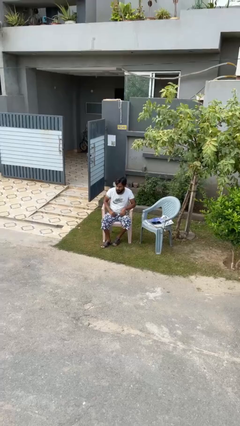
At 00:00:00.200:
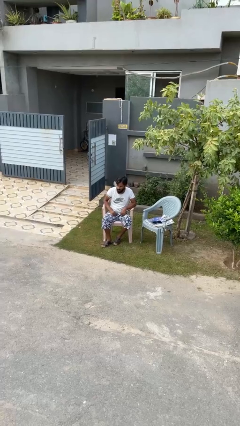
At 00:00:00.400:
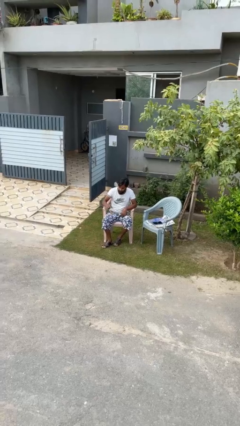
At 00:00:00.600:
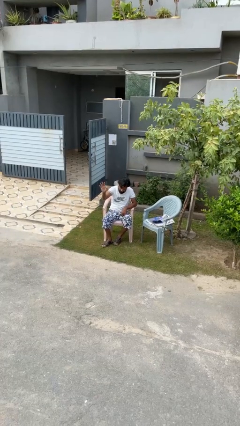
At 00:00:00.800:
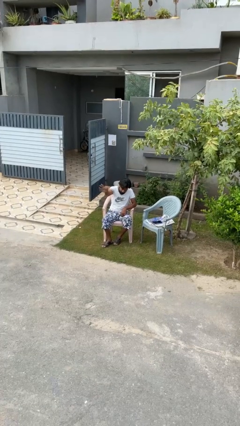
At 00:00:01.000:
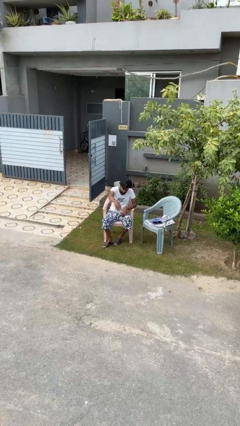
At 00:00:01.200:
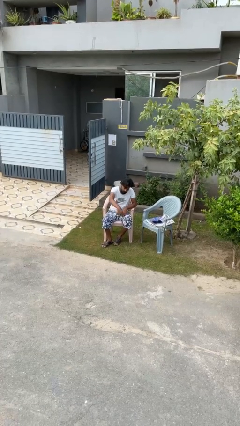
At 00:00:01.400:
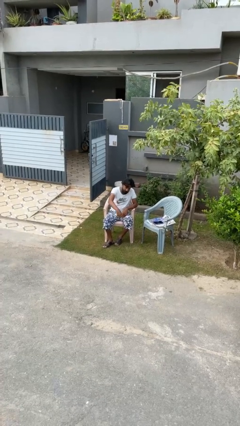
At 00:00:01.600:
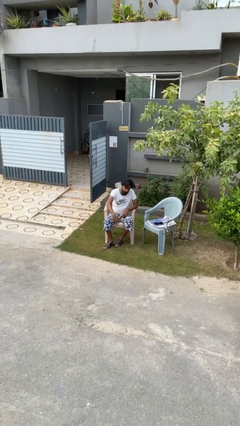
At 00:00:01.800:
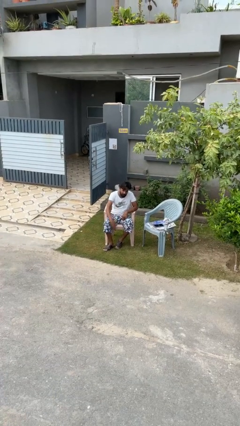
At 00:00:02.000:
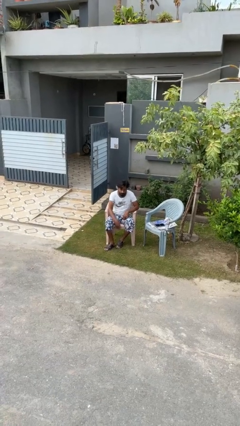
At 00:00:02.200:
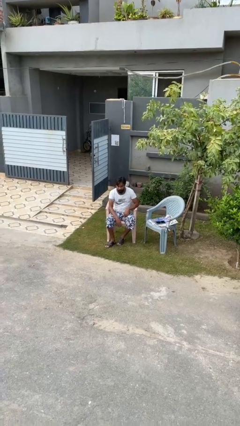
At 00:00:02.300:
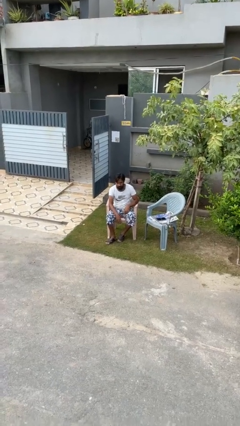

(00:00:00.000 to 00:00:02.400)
person gestures swipe down

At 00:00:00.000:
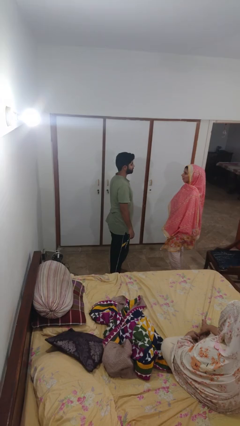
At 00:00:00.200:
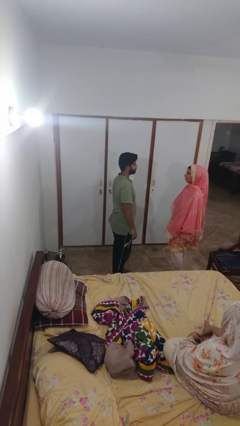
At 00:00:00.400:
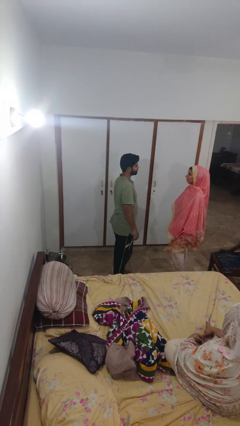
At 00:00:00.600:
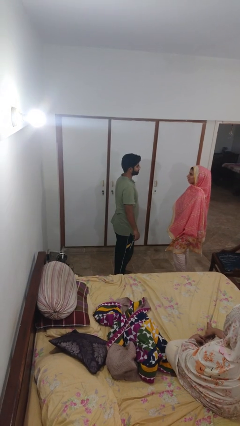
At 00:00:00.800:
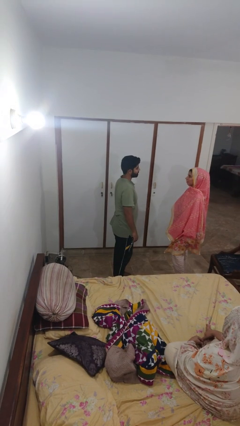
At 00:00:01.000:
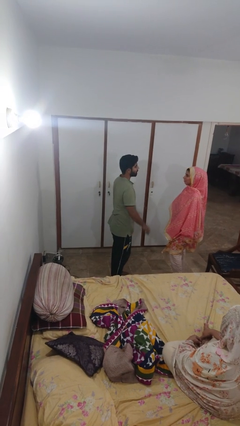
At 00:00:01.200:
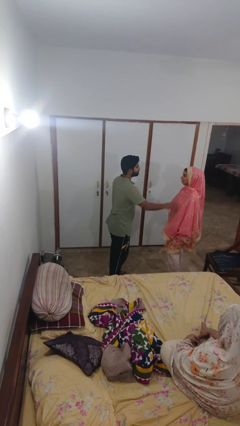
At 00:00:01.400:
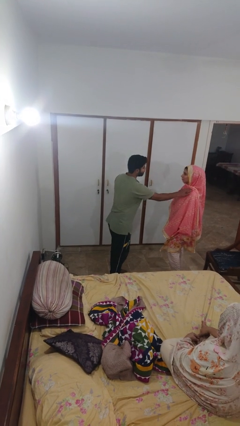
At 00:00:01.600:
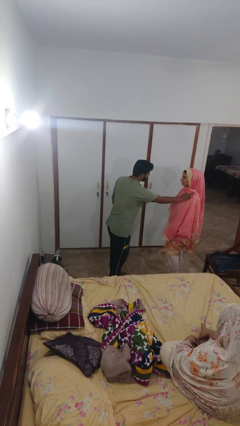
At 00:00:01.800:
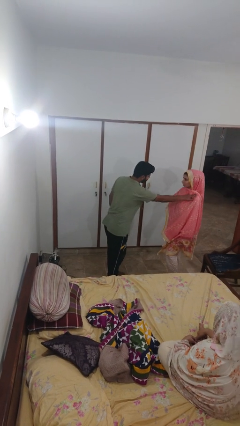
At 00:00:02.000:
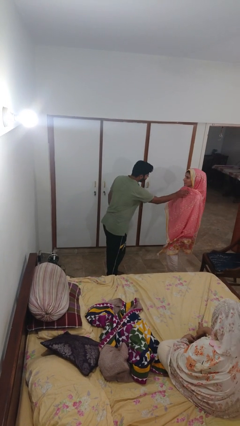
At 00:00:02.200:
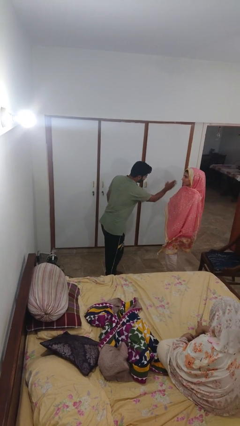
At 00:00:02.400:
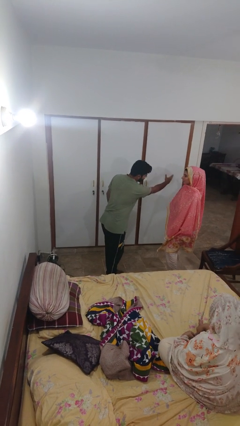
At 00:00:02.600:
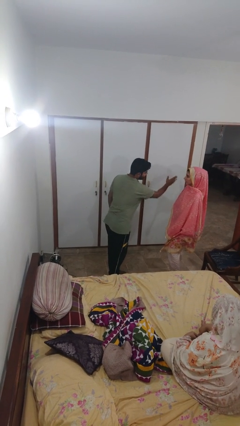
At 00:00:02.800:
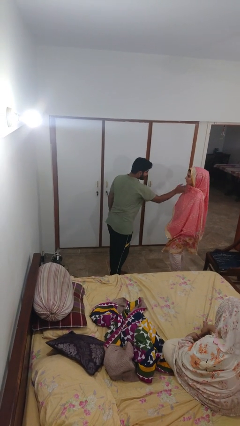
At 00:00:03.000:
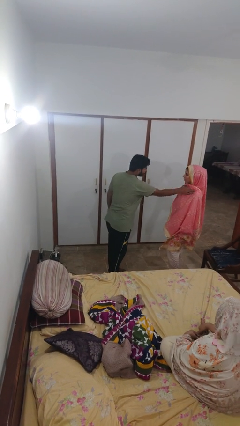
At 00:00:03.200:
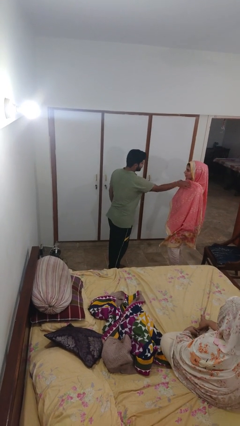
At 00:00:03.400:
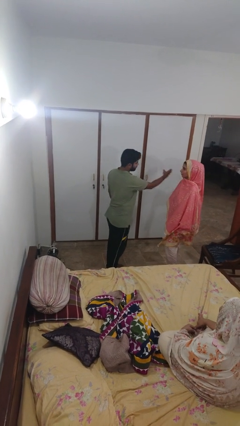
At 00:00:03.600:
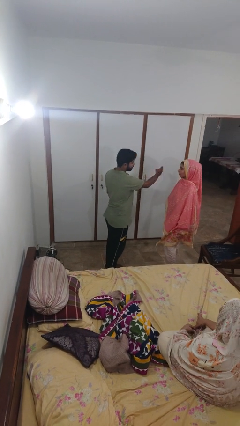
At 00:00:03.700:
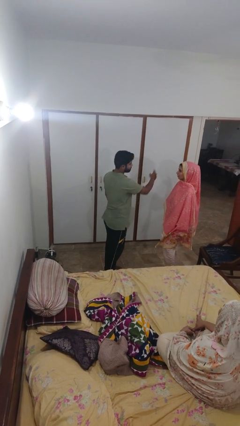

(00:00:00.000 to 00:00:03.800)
person shoves person

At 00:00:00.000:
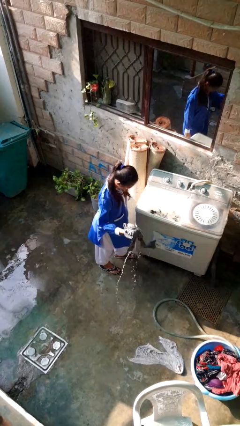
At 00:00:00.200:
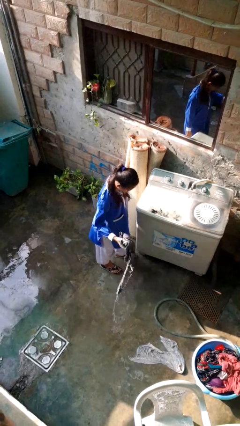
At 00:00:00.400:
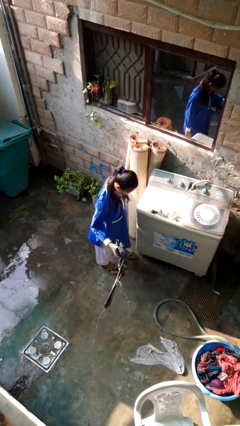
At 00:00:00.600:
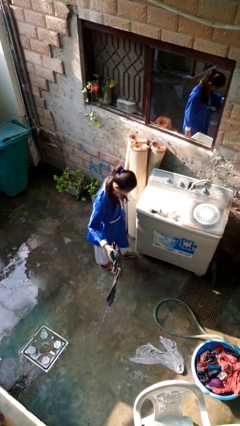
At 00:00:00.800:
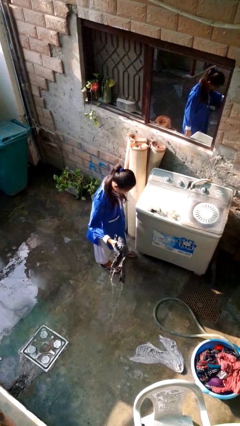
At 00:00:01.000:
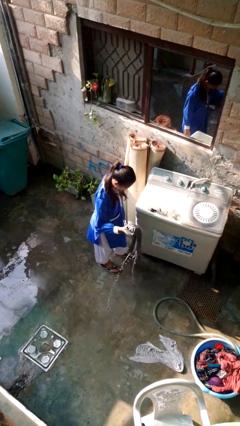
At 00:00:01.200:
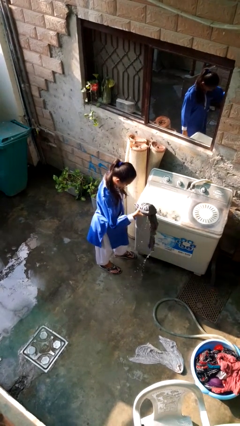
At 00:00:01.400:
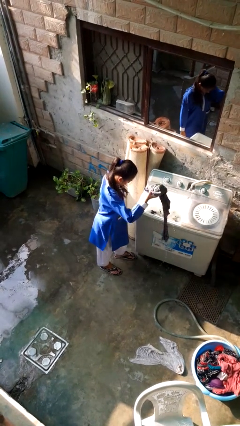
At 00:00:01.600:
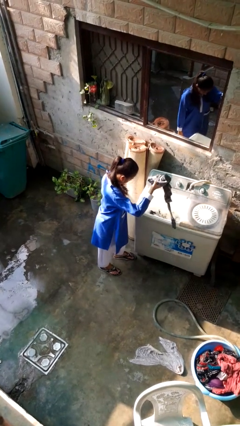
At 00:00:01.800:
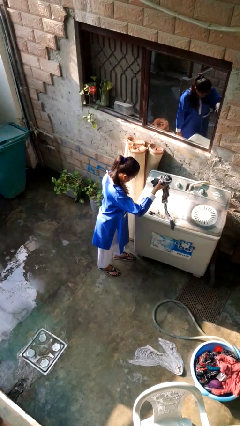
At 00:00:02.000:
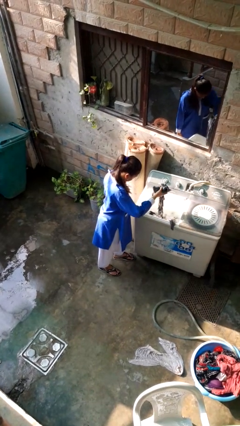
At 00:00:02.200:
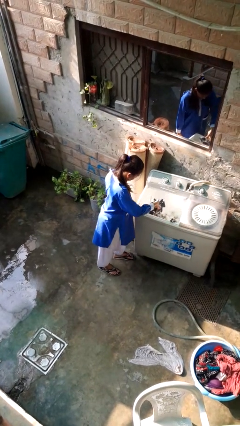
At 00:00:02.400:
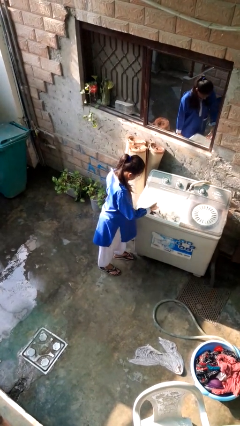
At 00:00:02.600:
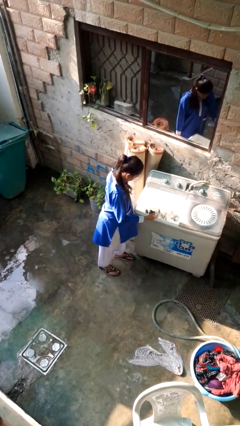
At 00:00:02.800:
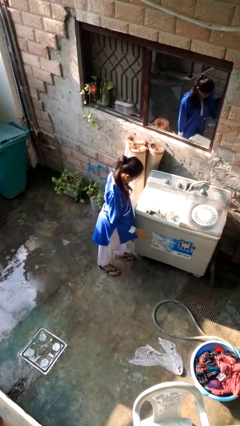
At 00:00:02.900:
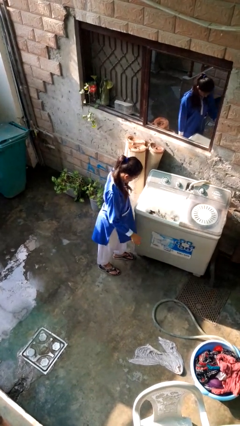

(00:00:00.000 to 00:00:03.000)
person loads clotheswasher

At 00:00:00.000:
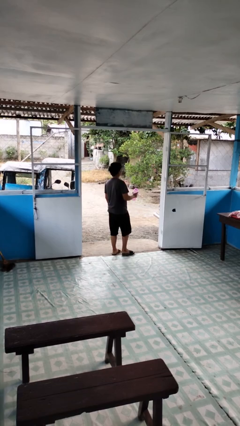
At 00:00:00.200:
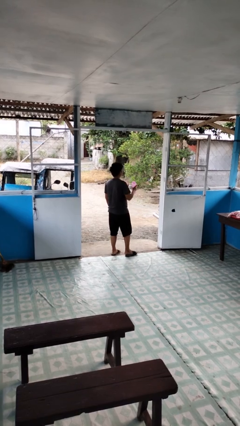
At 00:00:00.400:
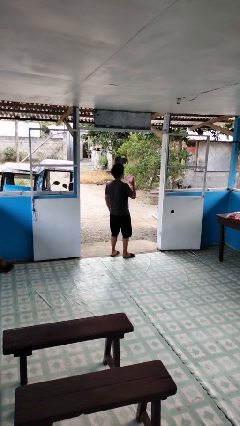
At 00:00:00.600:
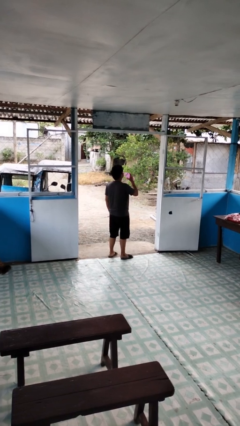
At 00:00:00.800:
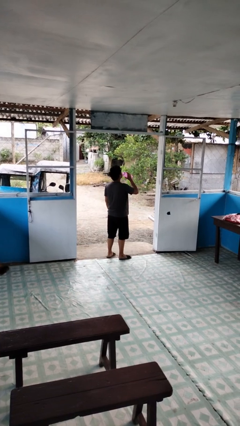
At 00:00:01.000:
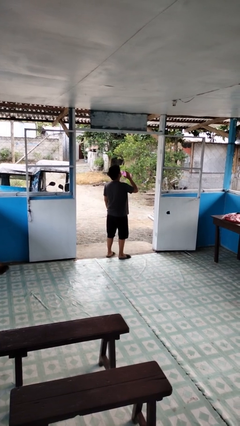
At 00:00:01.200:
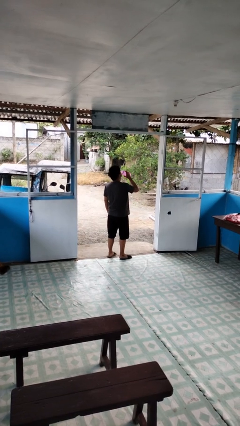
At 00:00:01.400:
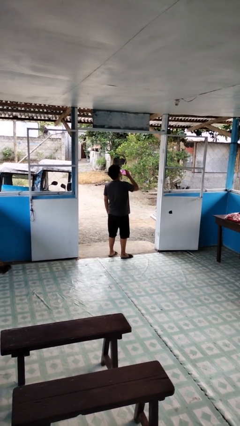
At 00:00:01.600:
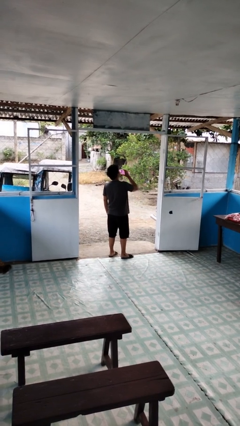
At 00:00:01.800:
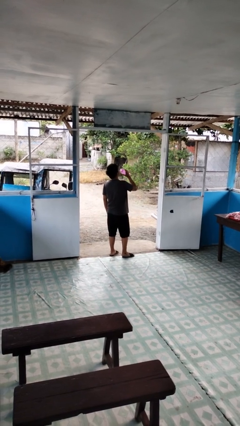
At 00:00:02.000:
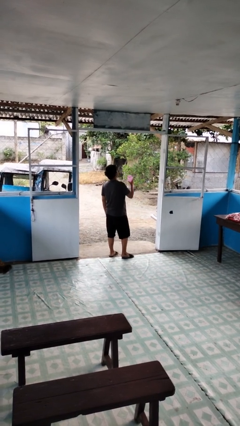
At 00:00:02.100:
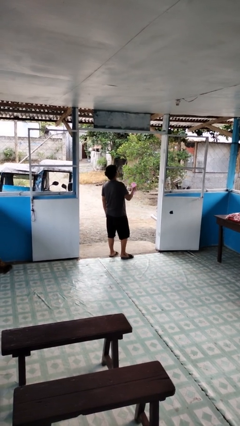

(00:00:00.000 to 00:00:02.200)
person drinks from bottle

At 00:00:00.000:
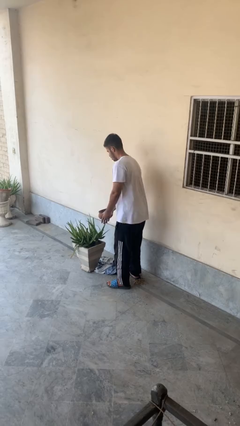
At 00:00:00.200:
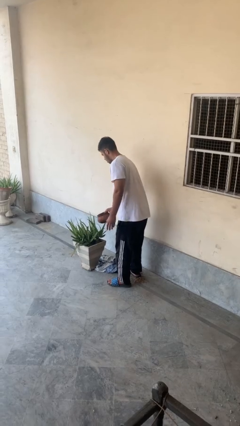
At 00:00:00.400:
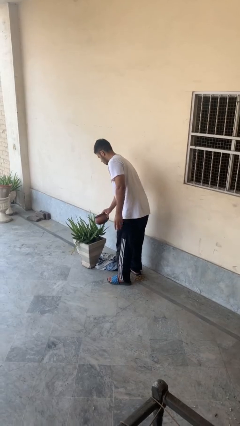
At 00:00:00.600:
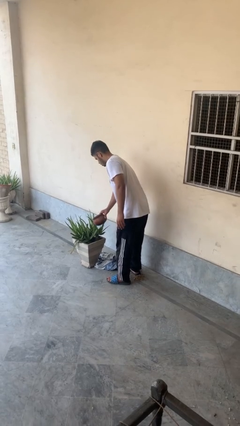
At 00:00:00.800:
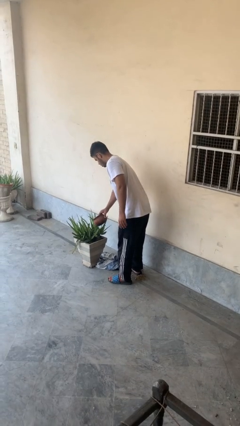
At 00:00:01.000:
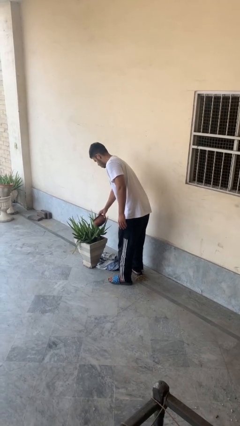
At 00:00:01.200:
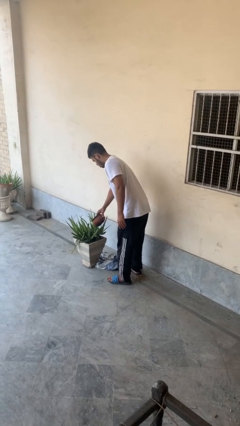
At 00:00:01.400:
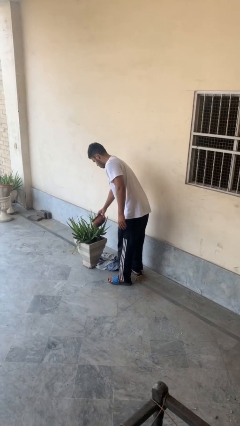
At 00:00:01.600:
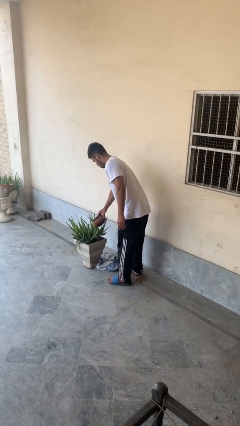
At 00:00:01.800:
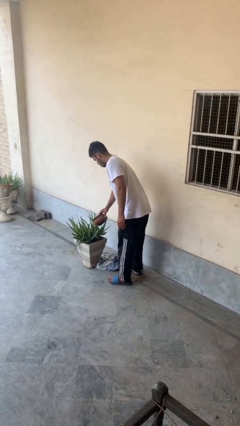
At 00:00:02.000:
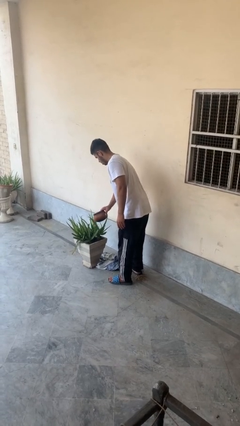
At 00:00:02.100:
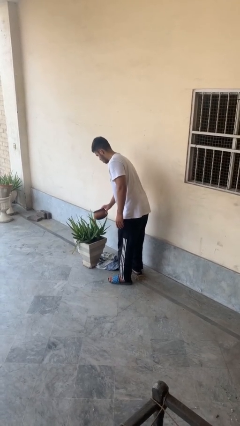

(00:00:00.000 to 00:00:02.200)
person waters houseplant

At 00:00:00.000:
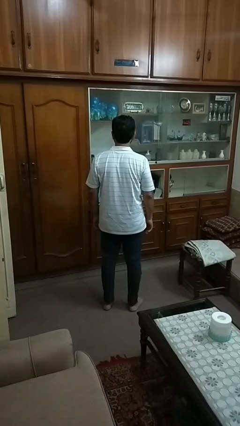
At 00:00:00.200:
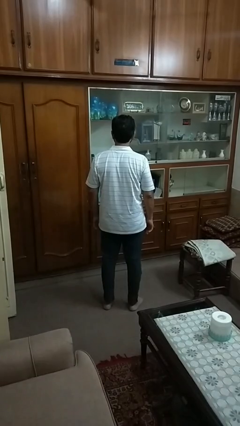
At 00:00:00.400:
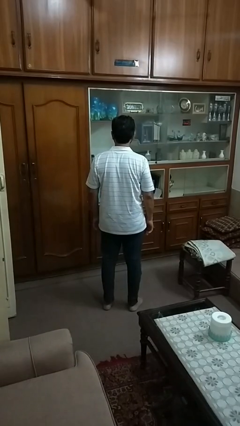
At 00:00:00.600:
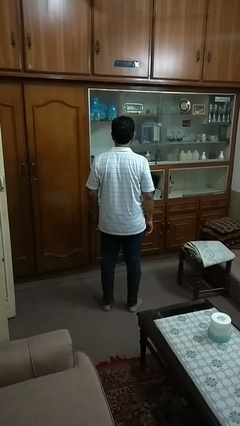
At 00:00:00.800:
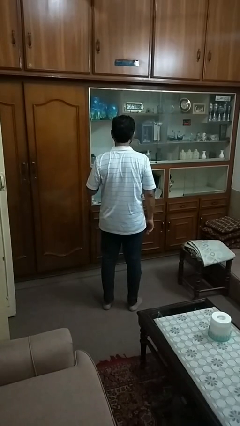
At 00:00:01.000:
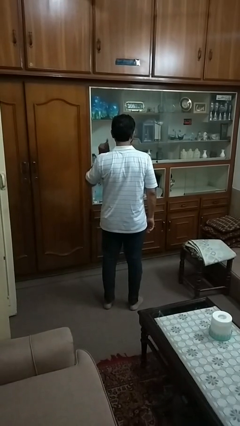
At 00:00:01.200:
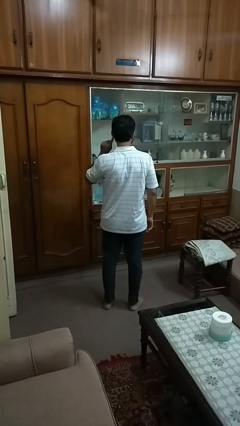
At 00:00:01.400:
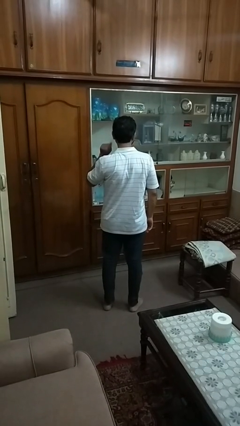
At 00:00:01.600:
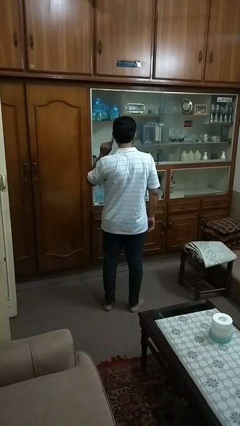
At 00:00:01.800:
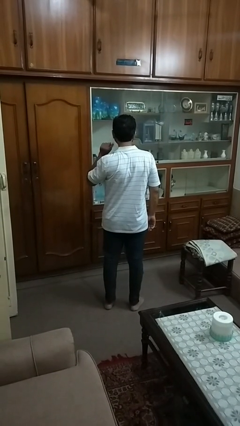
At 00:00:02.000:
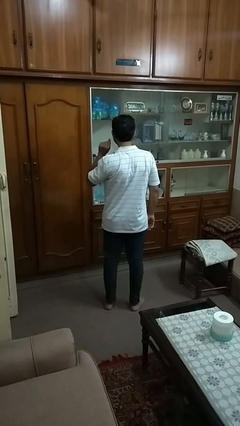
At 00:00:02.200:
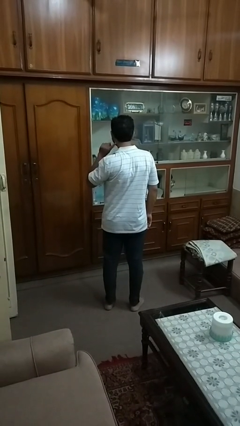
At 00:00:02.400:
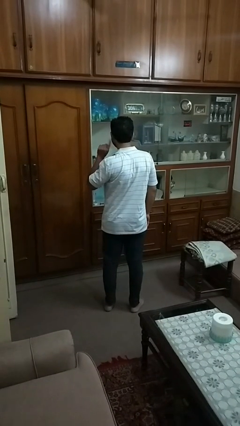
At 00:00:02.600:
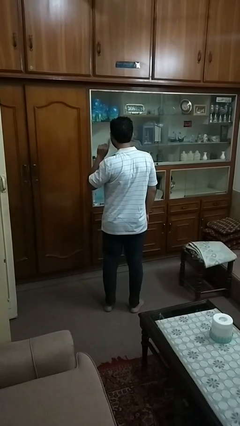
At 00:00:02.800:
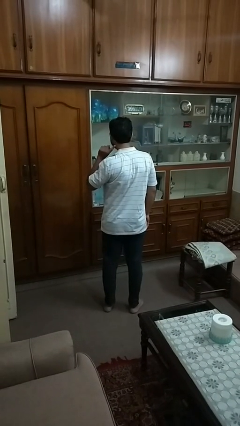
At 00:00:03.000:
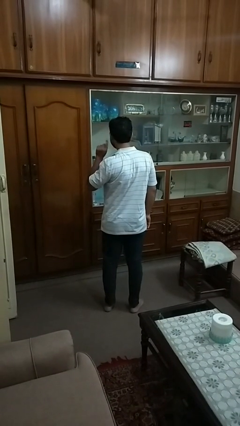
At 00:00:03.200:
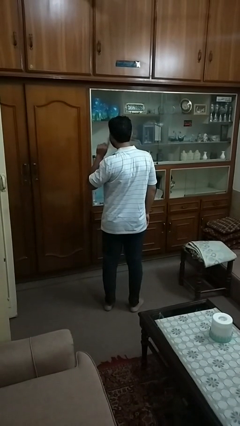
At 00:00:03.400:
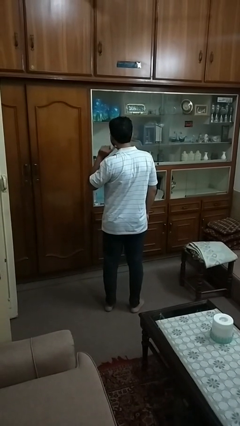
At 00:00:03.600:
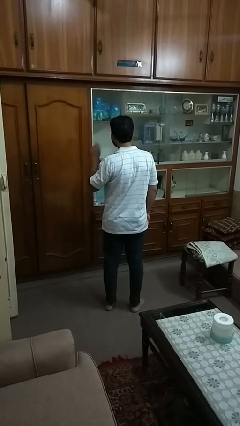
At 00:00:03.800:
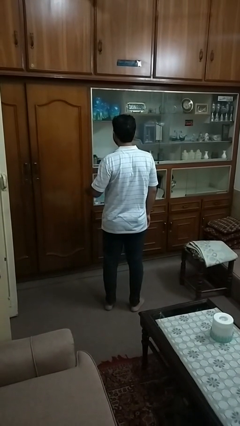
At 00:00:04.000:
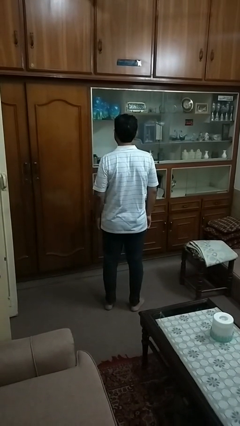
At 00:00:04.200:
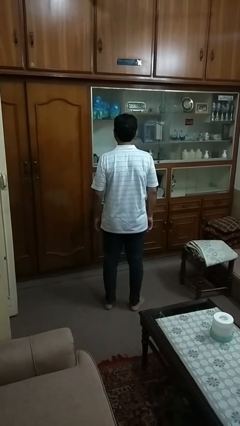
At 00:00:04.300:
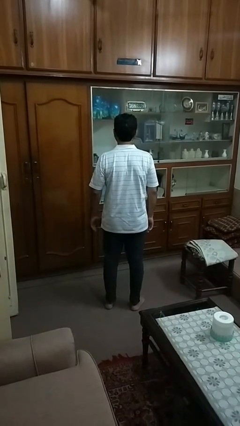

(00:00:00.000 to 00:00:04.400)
person touches earlobe
